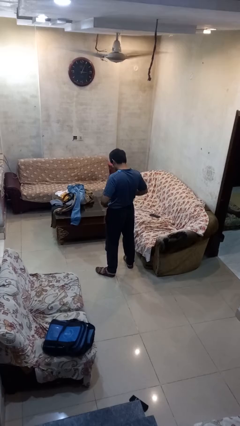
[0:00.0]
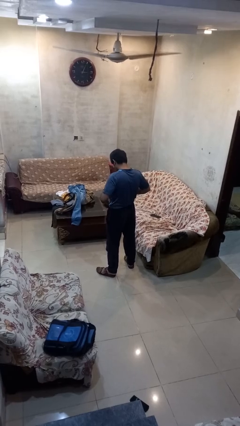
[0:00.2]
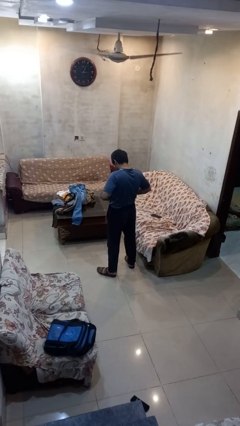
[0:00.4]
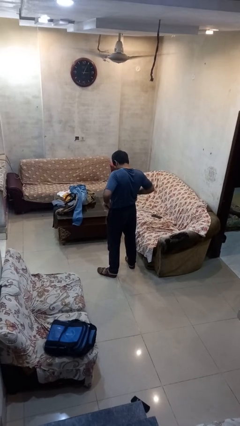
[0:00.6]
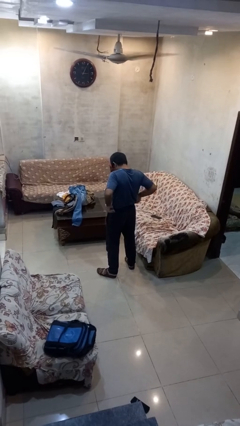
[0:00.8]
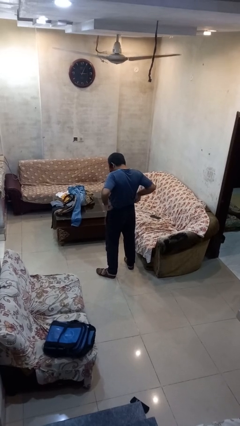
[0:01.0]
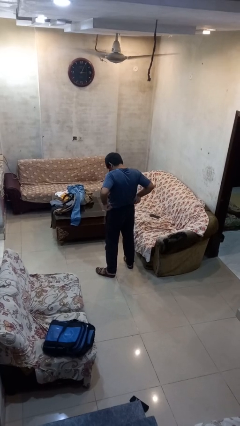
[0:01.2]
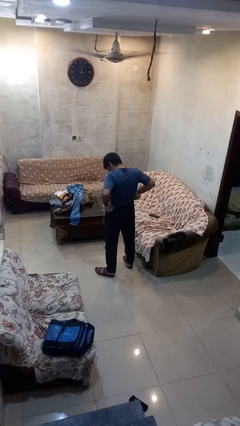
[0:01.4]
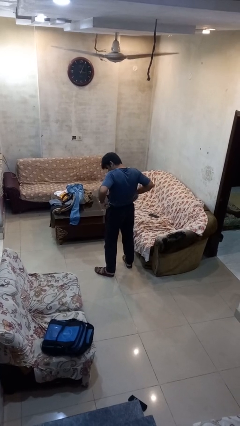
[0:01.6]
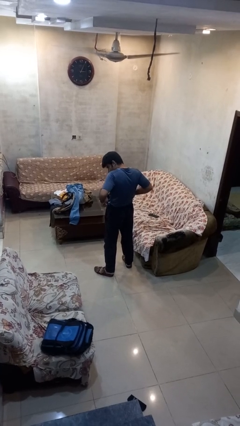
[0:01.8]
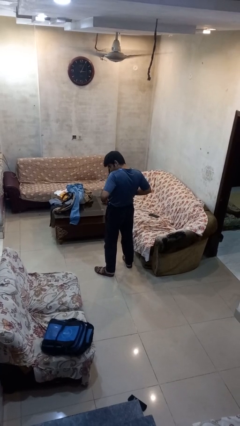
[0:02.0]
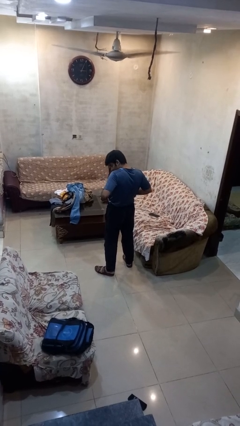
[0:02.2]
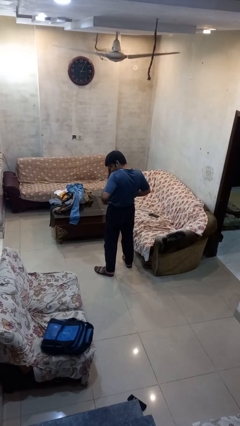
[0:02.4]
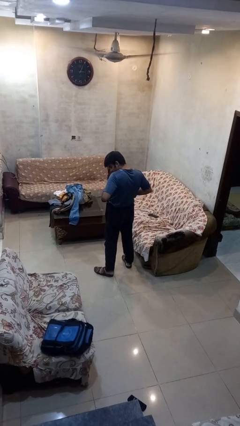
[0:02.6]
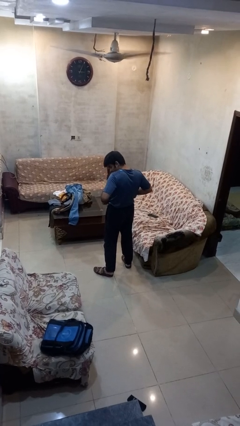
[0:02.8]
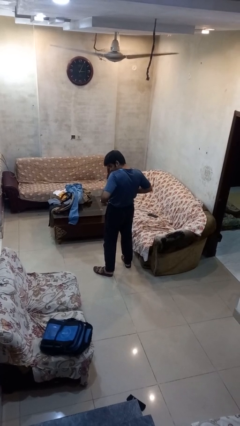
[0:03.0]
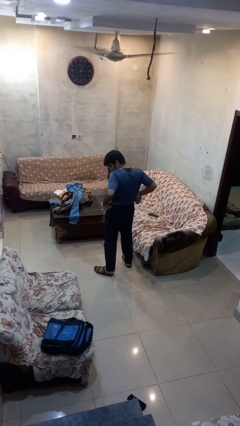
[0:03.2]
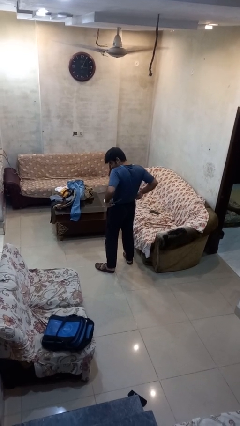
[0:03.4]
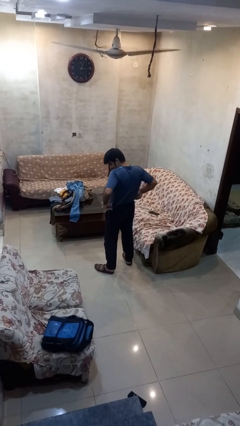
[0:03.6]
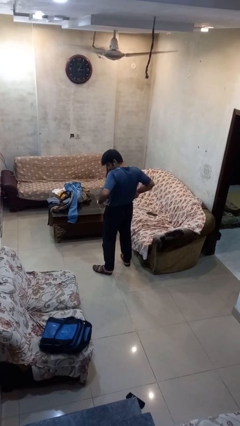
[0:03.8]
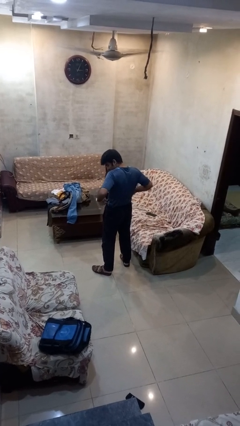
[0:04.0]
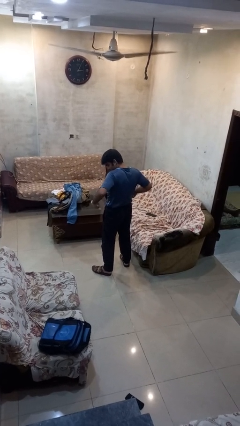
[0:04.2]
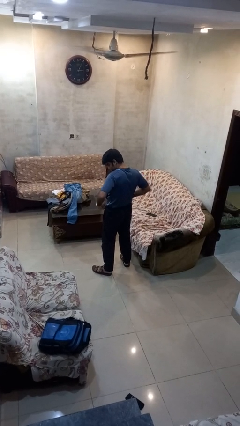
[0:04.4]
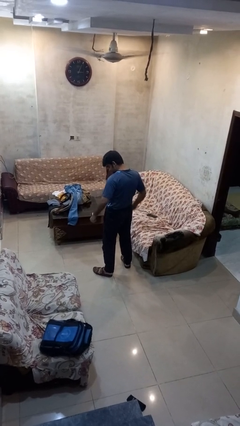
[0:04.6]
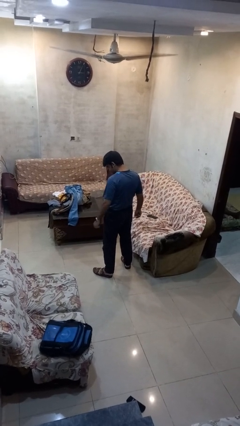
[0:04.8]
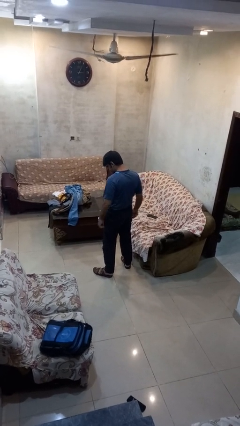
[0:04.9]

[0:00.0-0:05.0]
person hikes up pants

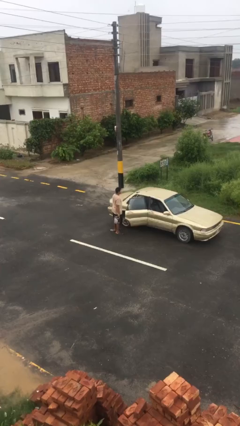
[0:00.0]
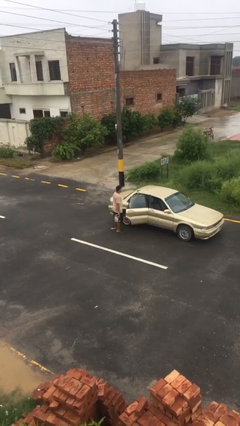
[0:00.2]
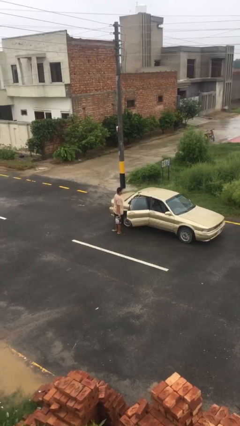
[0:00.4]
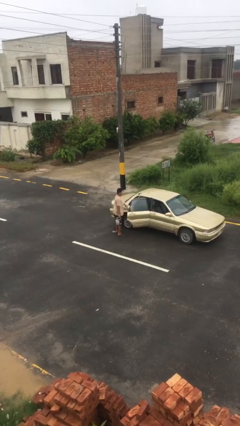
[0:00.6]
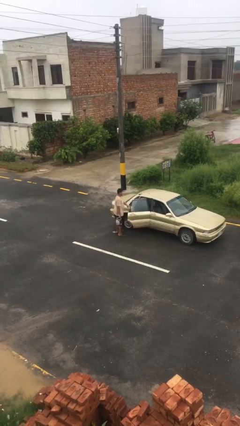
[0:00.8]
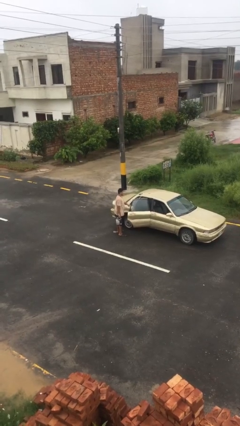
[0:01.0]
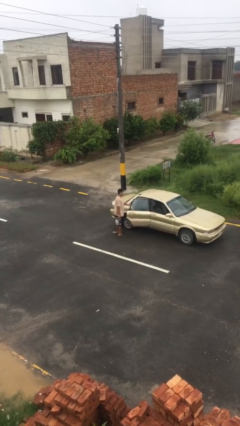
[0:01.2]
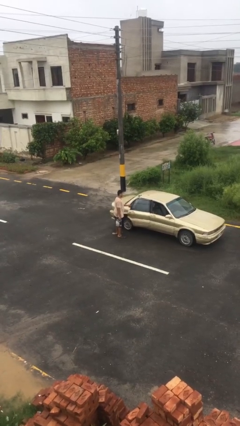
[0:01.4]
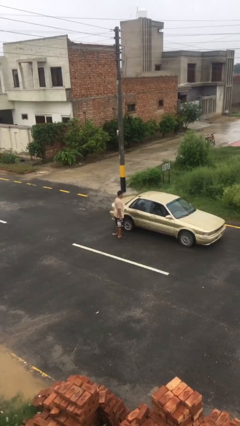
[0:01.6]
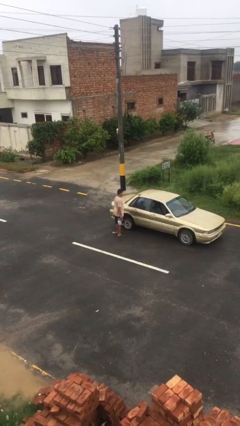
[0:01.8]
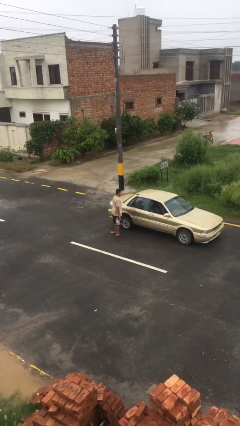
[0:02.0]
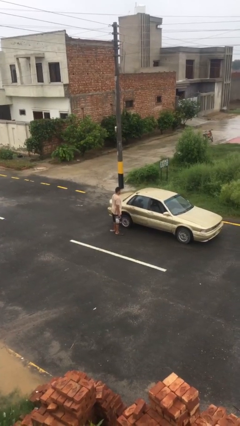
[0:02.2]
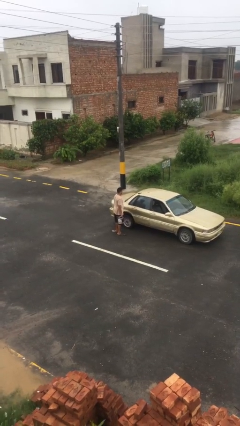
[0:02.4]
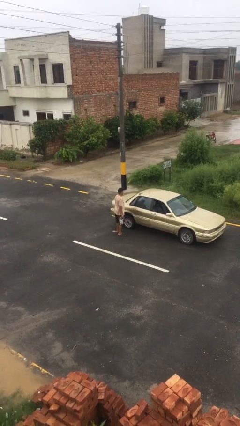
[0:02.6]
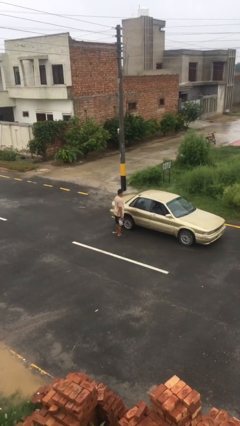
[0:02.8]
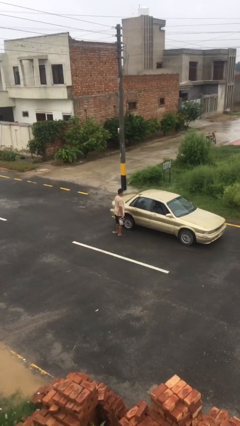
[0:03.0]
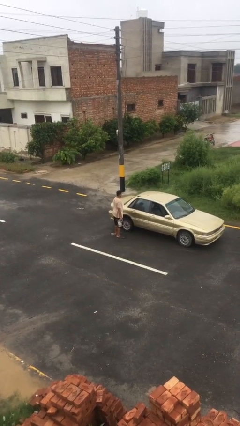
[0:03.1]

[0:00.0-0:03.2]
person closes car door

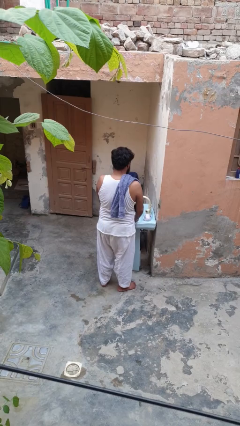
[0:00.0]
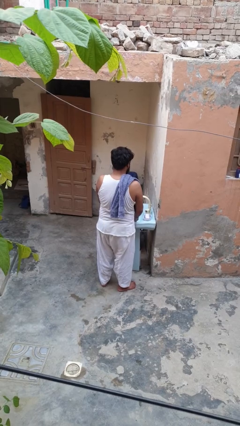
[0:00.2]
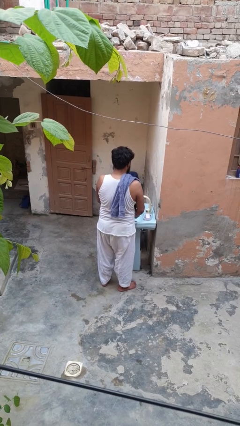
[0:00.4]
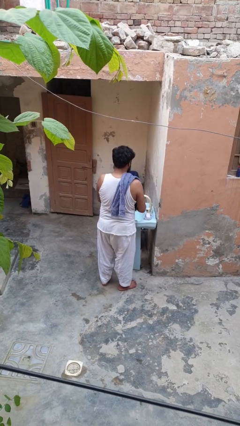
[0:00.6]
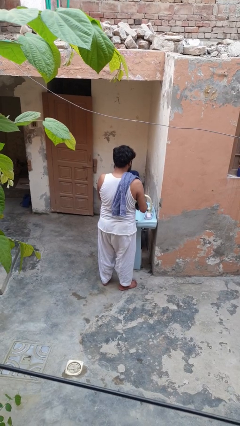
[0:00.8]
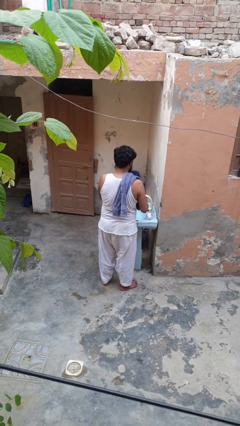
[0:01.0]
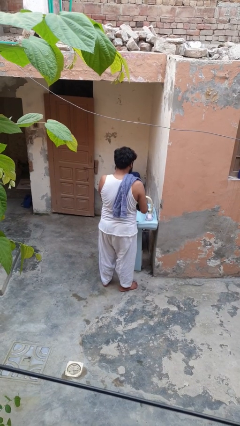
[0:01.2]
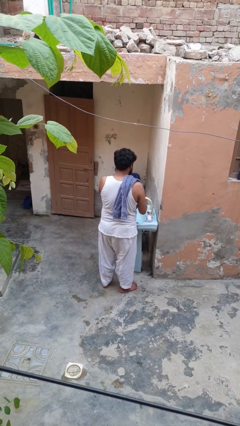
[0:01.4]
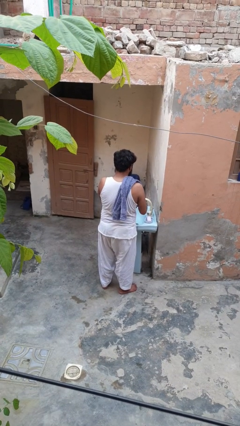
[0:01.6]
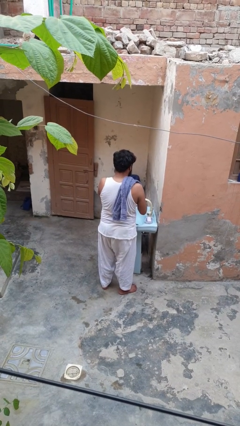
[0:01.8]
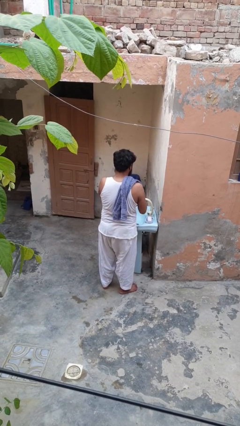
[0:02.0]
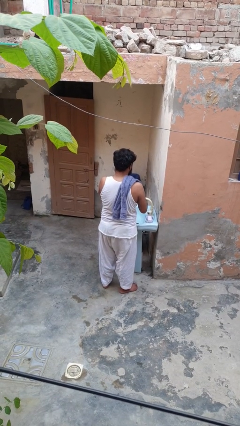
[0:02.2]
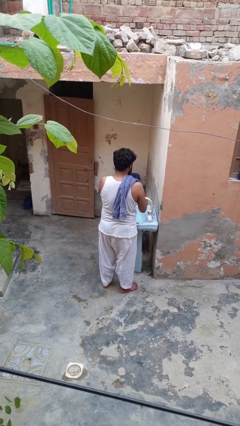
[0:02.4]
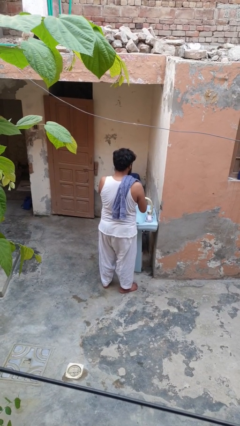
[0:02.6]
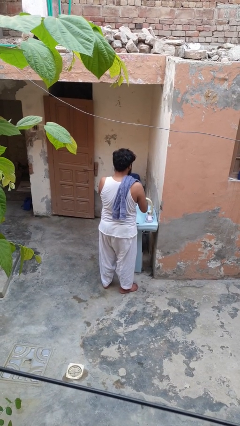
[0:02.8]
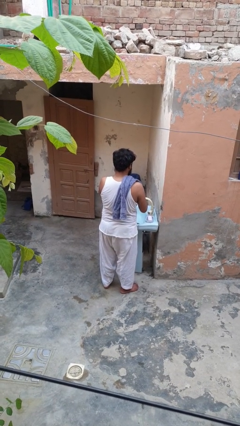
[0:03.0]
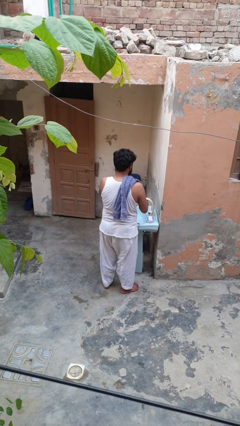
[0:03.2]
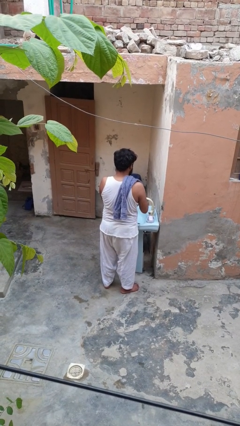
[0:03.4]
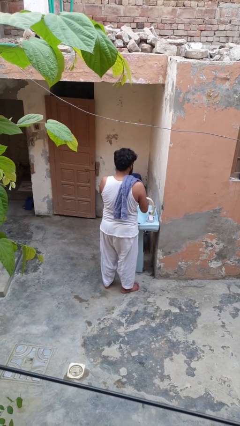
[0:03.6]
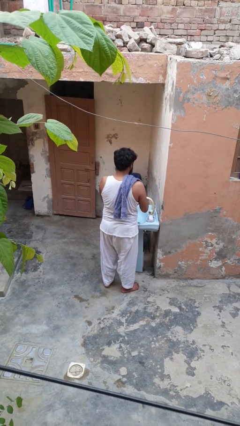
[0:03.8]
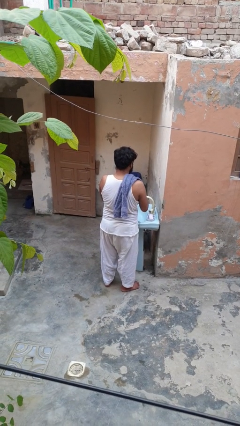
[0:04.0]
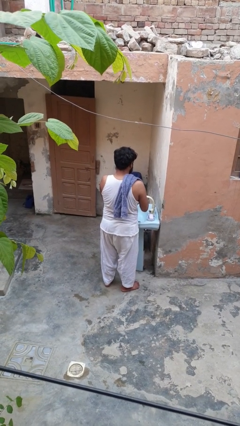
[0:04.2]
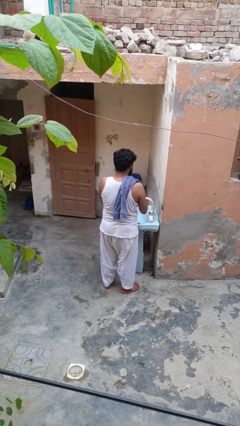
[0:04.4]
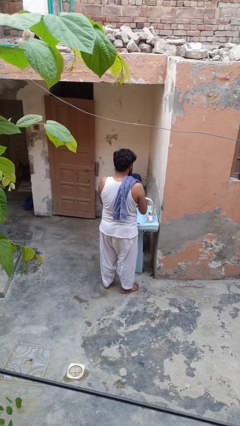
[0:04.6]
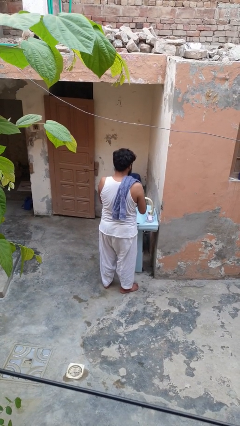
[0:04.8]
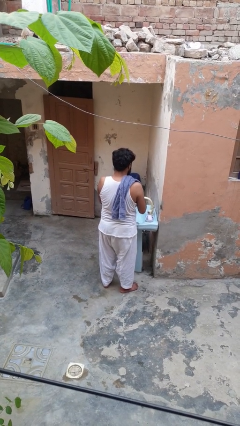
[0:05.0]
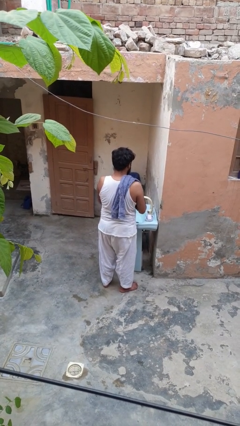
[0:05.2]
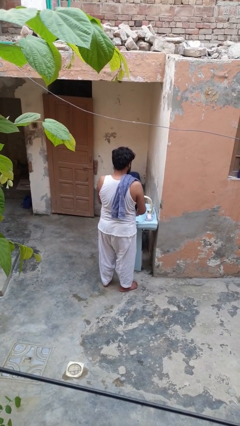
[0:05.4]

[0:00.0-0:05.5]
person dries hands with towel

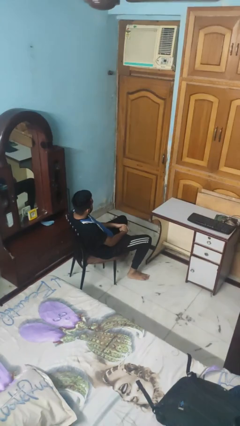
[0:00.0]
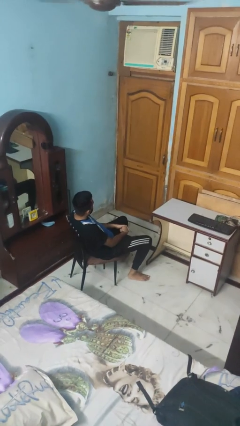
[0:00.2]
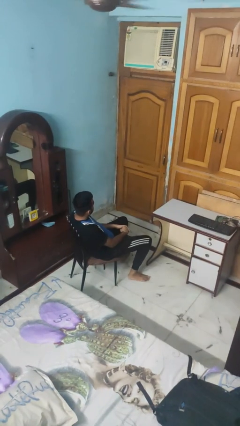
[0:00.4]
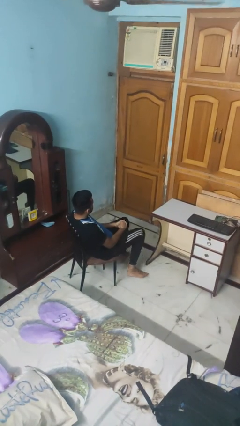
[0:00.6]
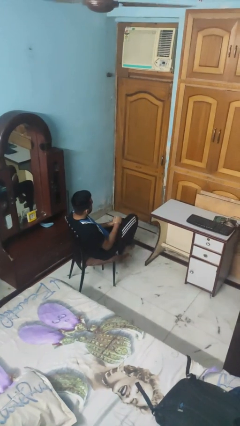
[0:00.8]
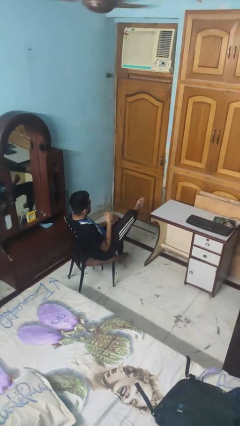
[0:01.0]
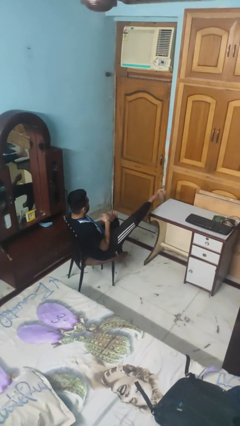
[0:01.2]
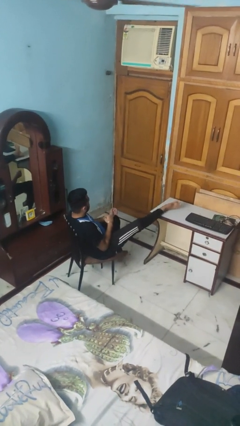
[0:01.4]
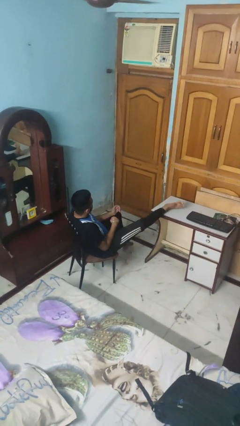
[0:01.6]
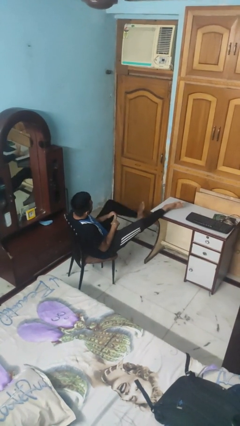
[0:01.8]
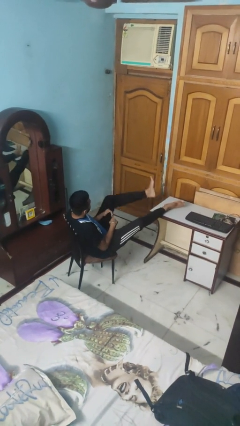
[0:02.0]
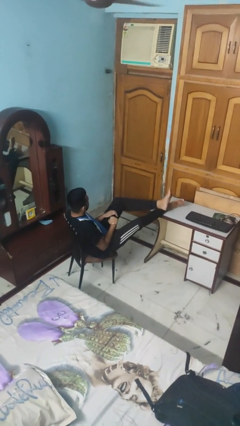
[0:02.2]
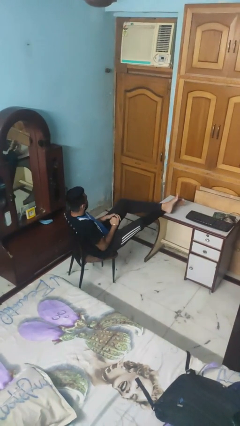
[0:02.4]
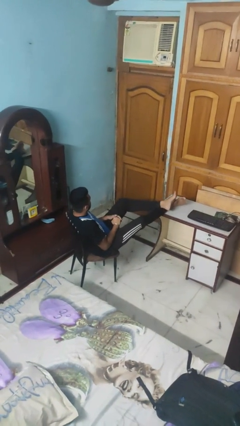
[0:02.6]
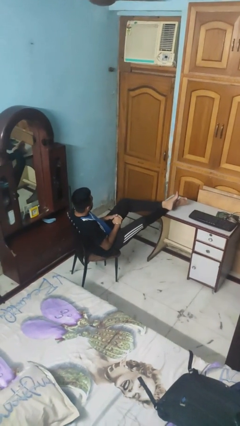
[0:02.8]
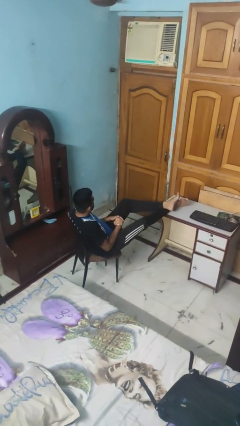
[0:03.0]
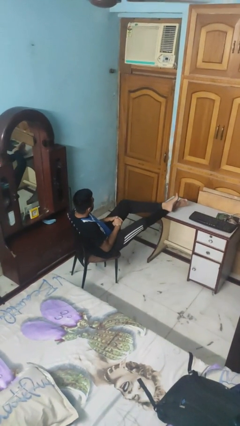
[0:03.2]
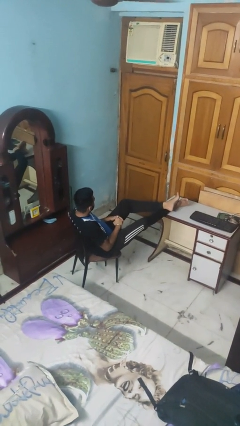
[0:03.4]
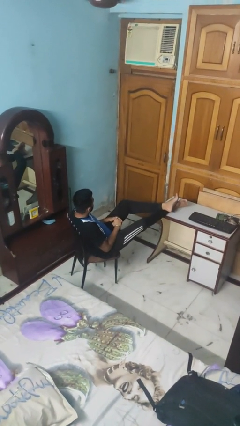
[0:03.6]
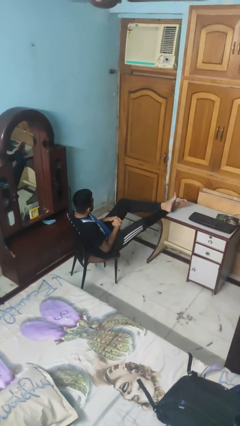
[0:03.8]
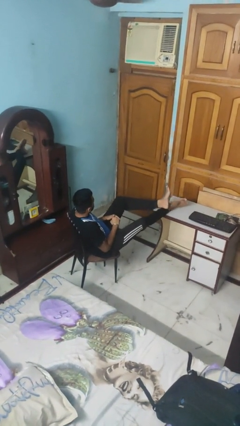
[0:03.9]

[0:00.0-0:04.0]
person puts feet up
